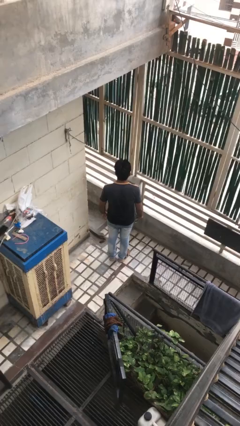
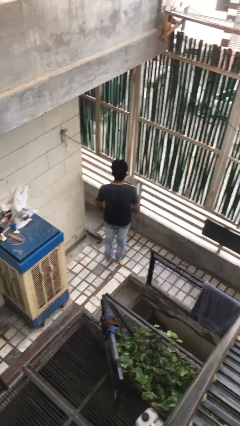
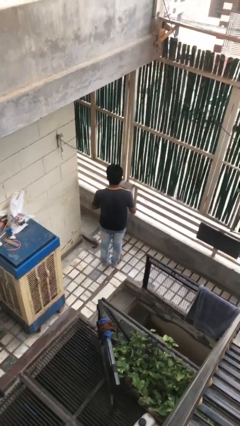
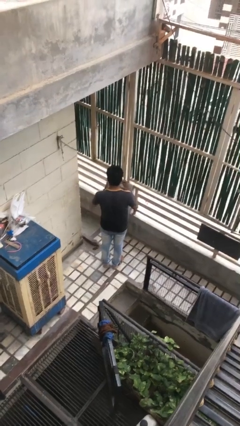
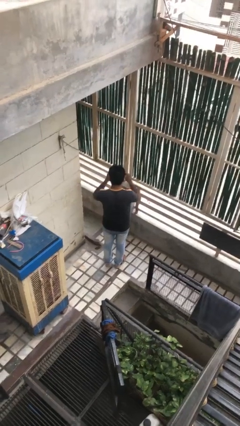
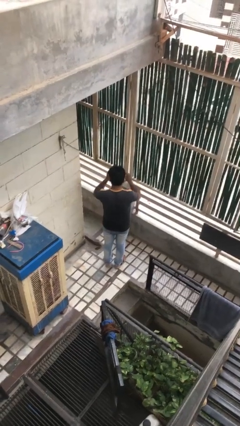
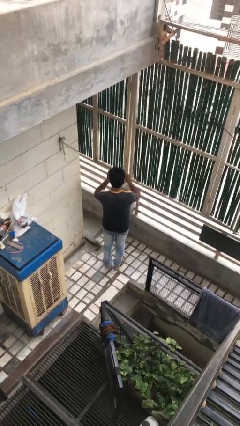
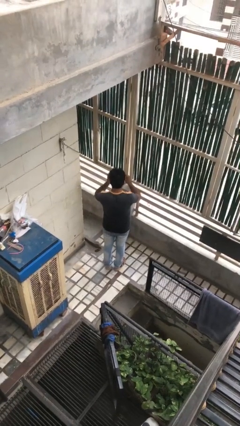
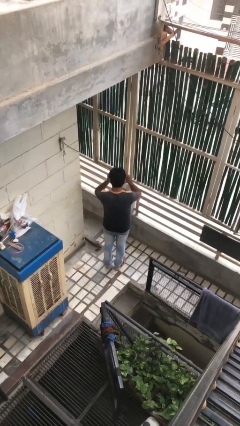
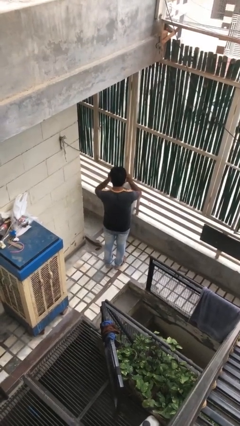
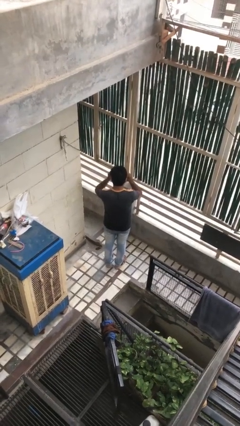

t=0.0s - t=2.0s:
person puts on glasses

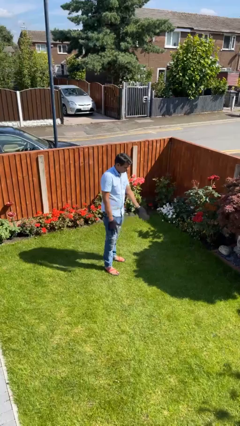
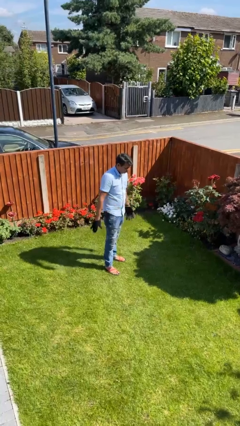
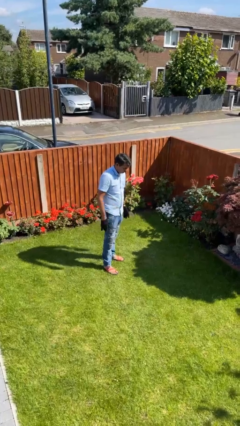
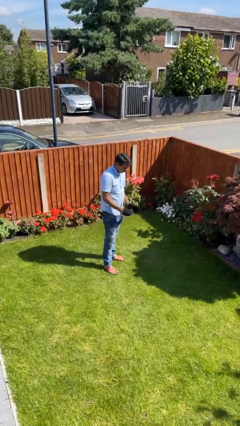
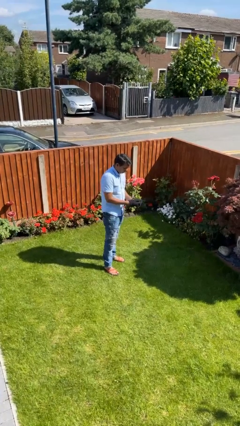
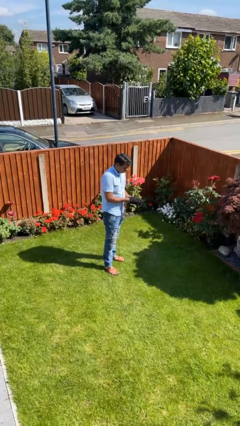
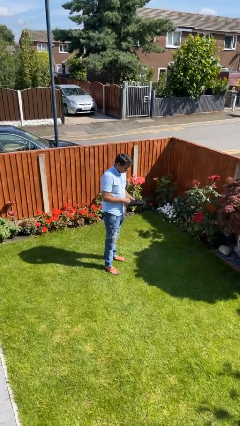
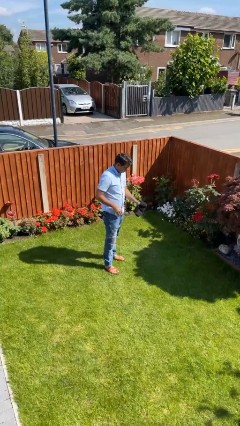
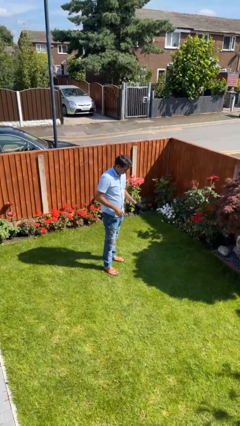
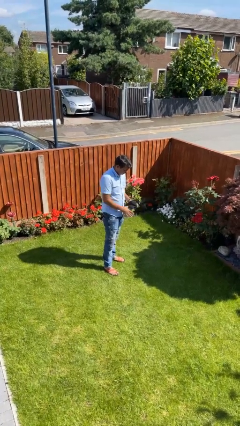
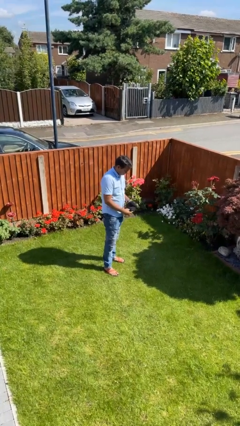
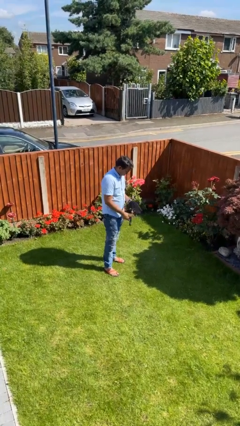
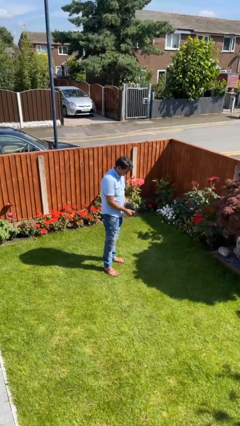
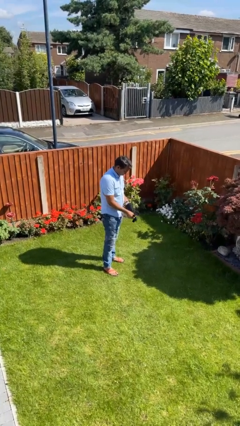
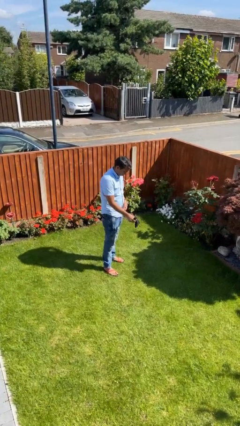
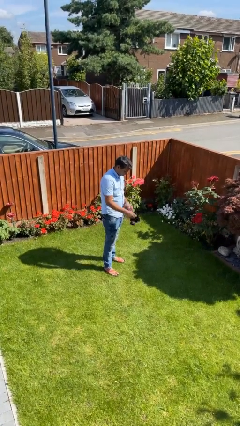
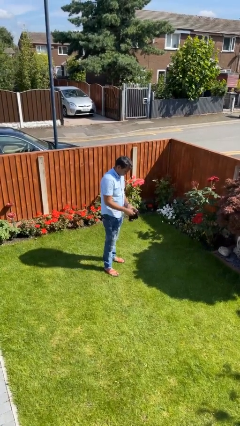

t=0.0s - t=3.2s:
person takes off gloves

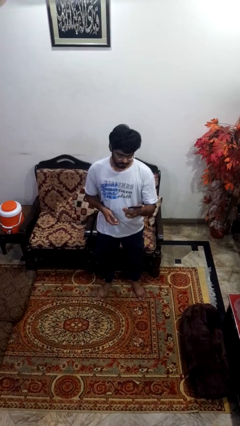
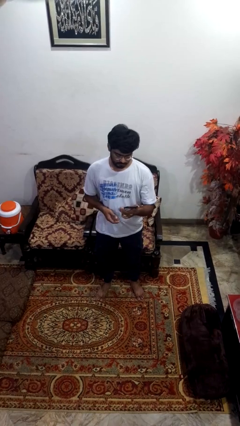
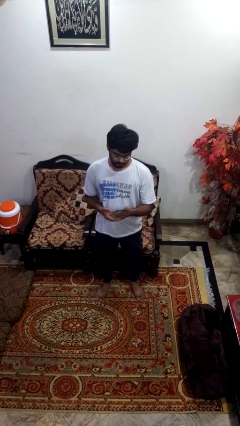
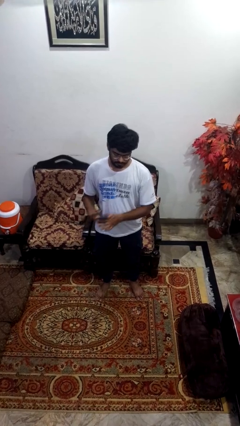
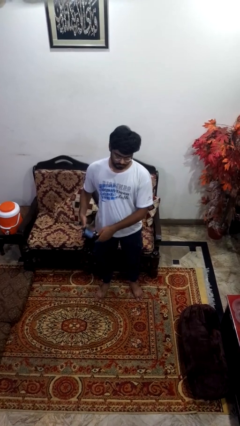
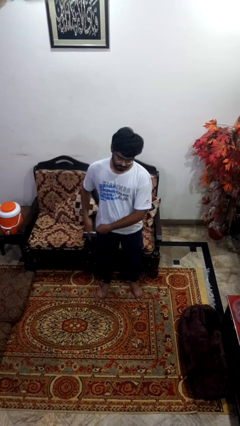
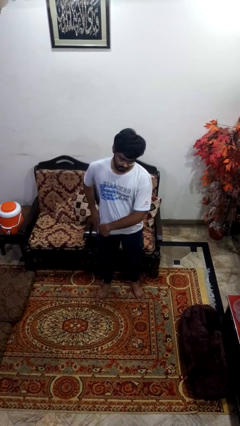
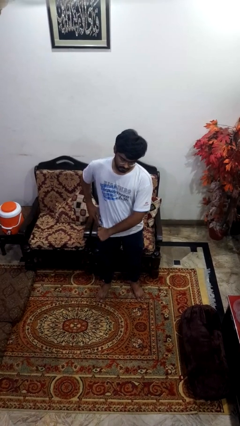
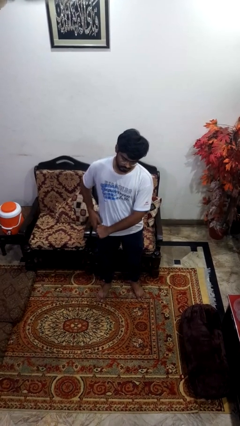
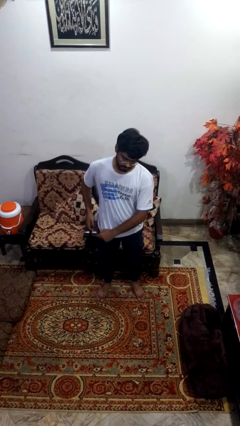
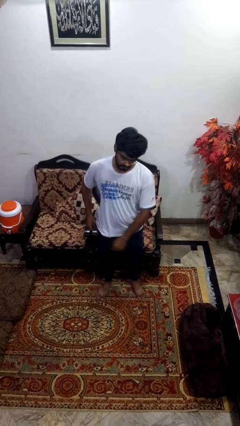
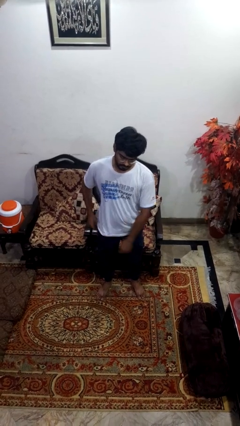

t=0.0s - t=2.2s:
person puts phone into pocket

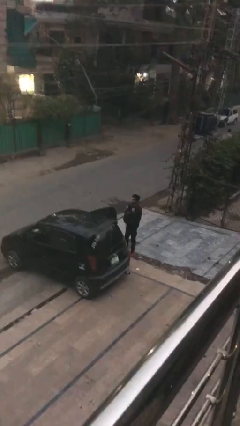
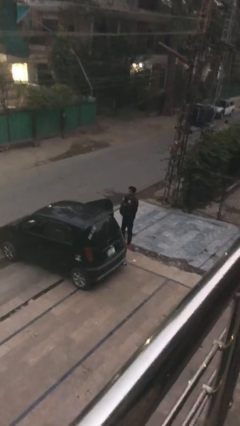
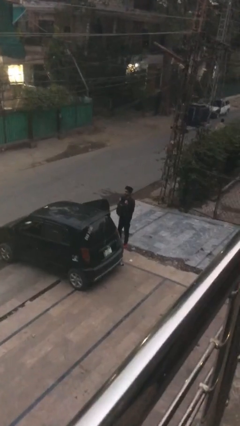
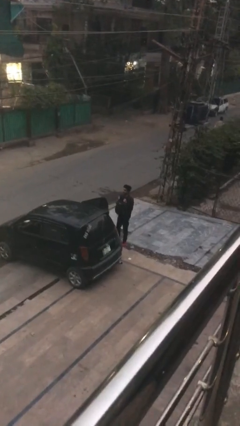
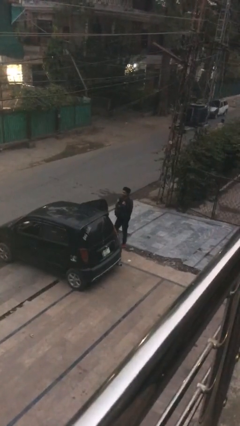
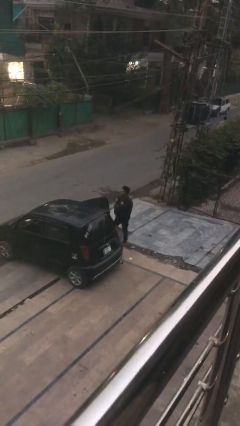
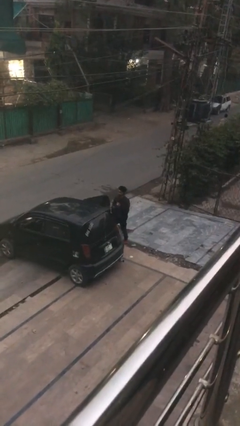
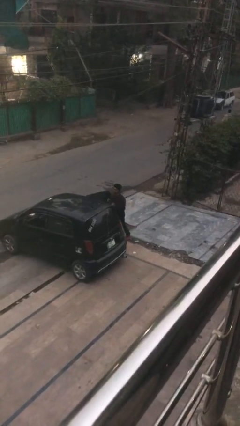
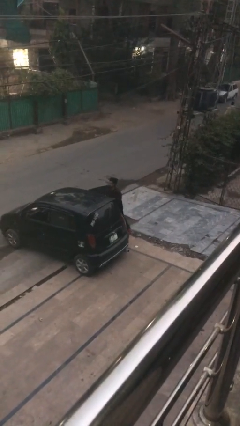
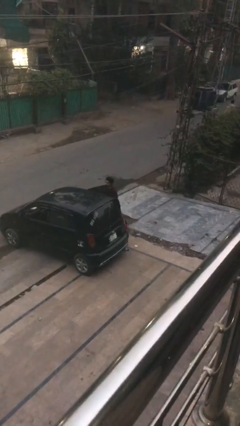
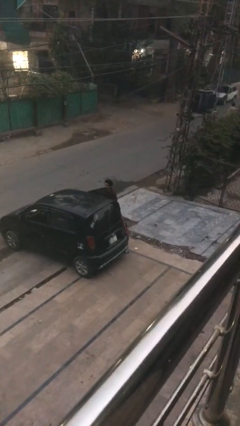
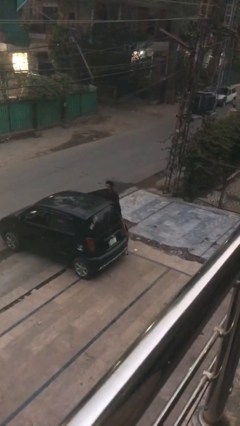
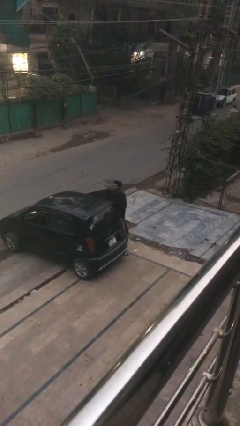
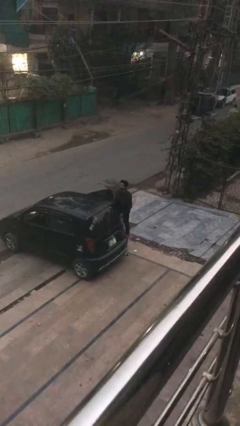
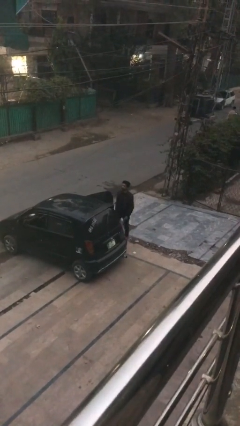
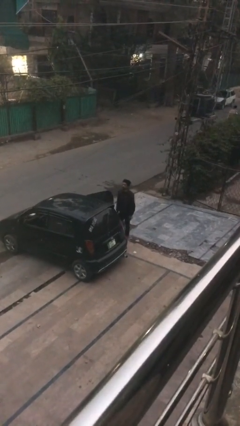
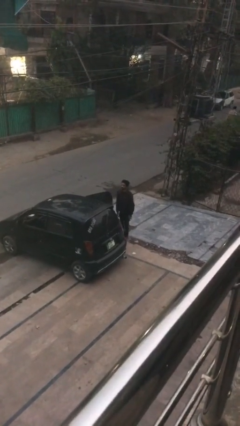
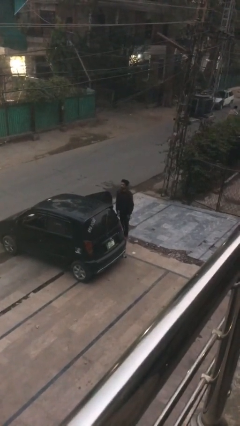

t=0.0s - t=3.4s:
person loads car

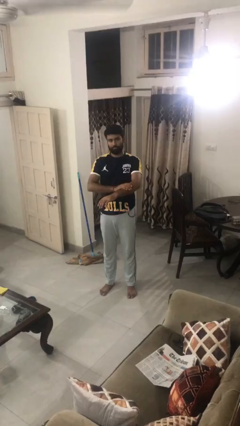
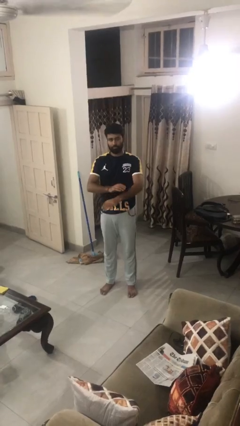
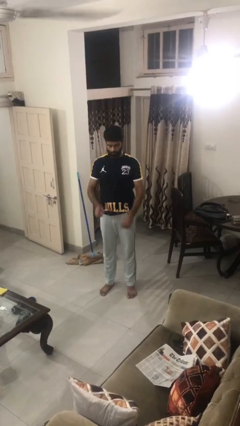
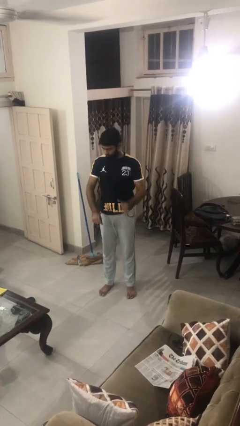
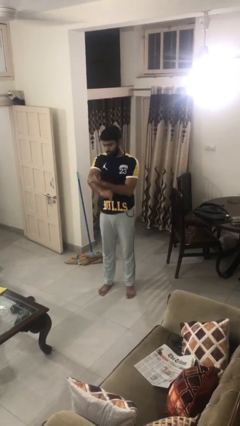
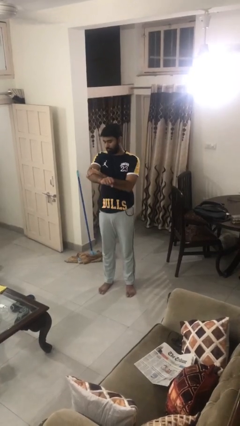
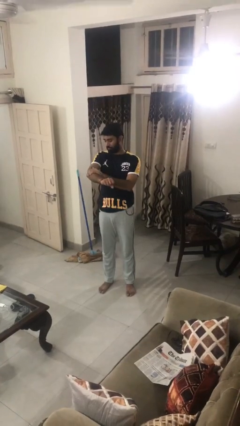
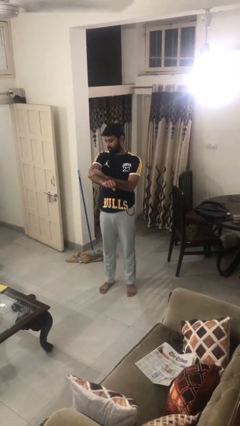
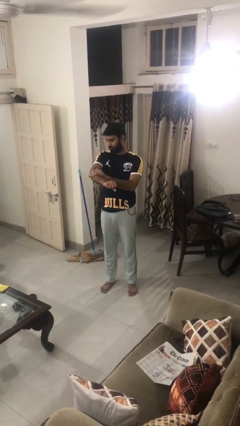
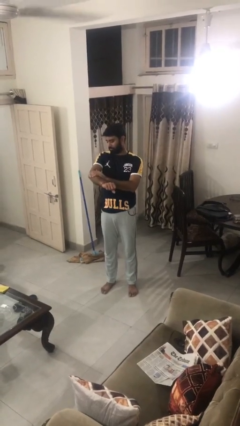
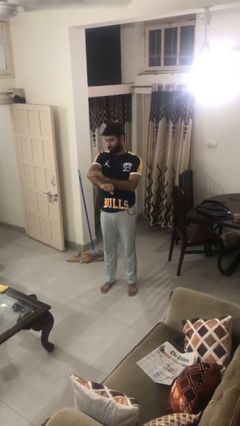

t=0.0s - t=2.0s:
person swats bug

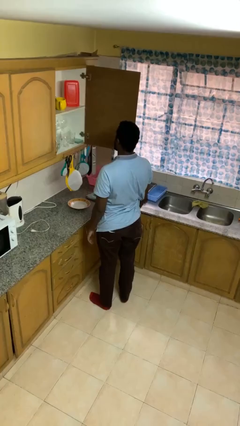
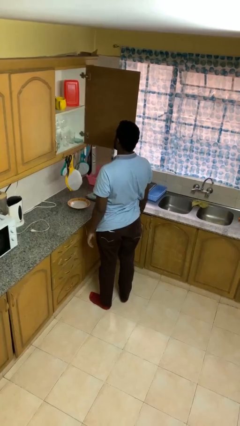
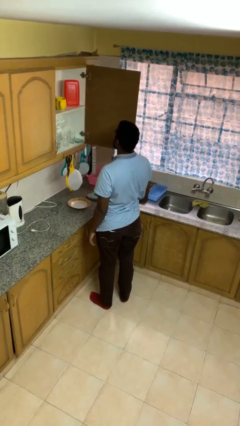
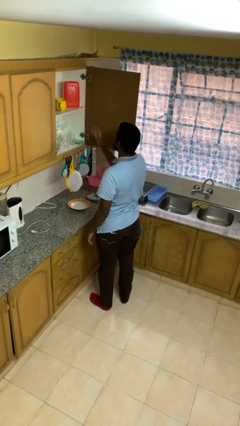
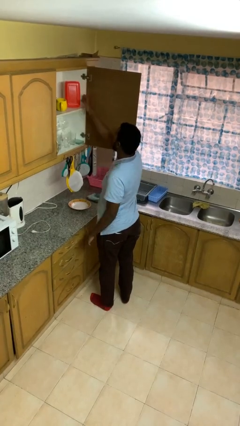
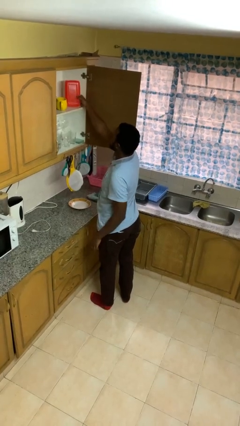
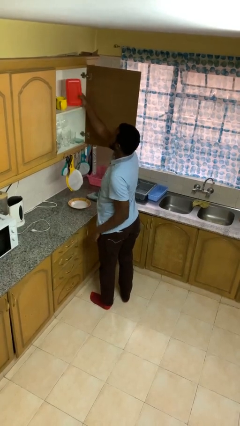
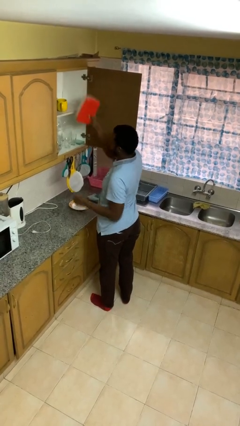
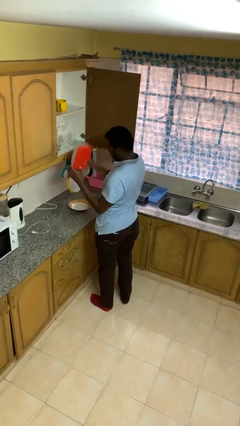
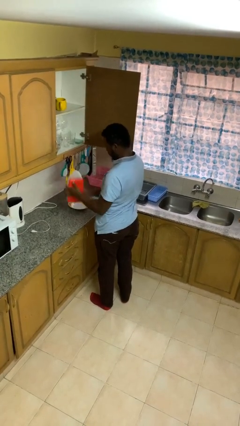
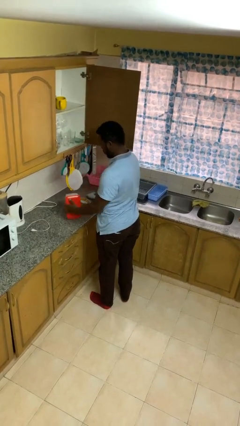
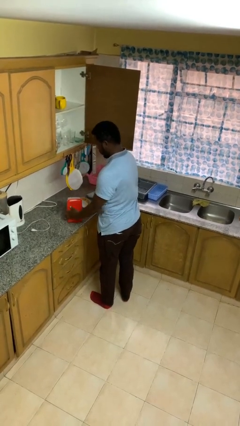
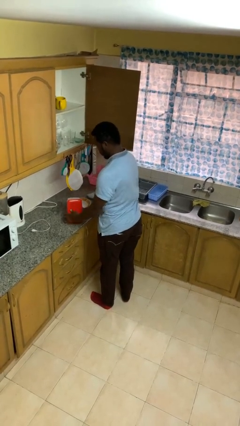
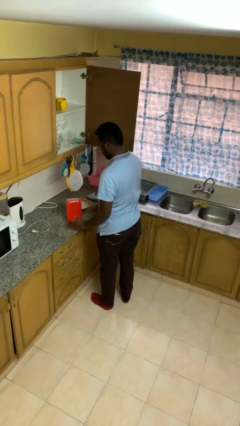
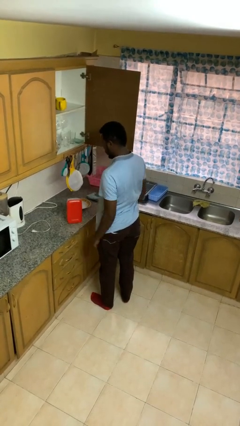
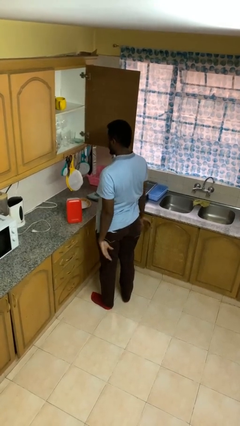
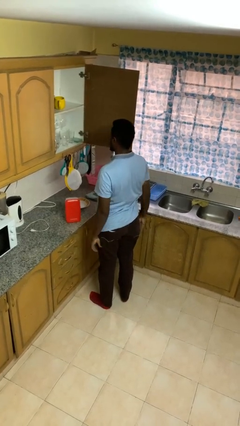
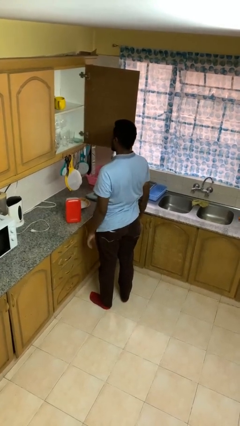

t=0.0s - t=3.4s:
person takes object from cabinet

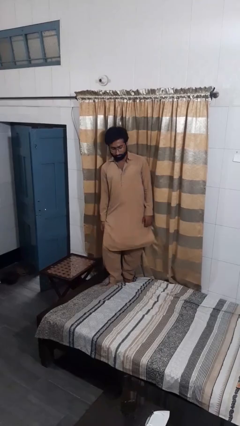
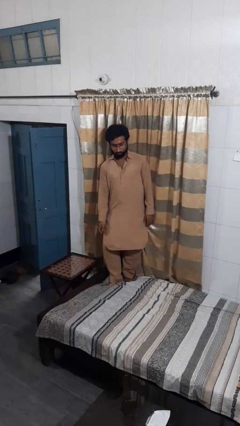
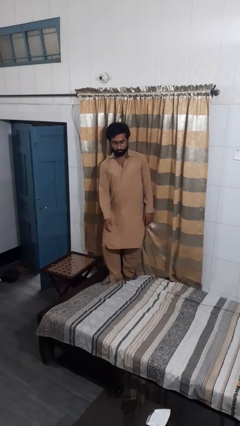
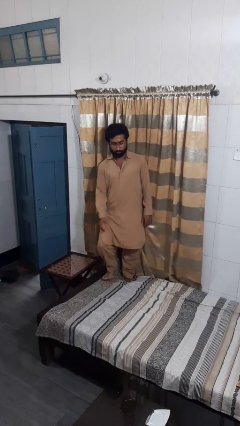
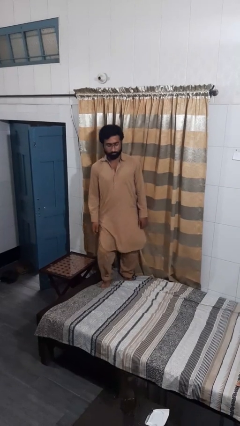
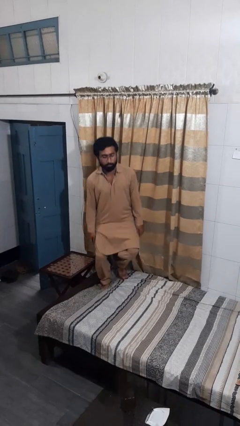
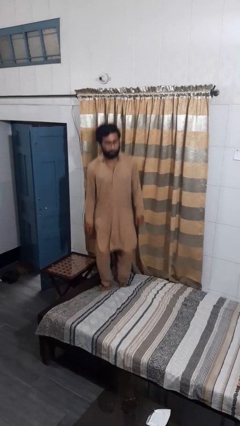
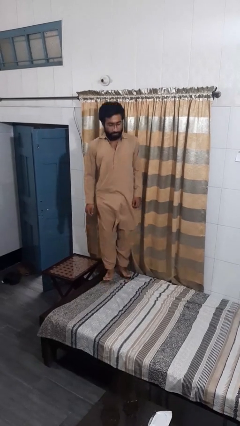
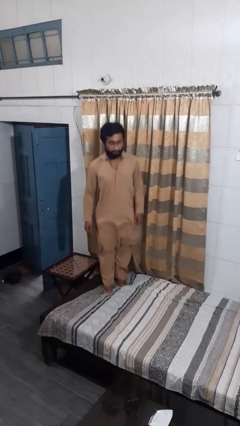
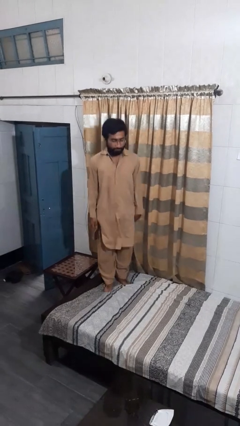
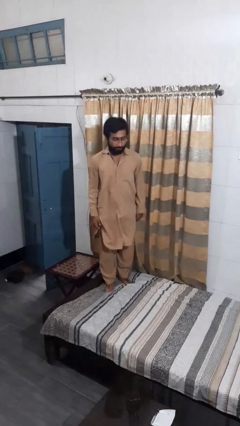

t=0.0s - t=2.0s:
person jumps on bed
